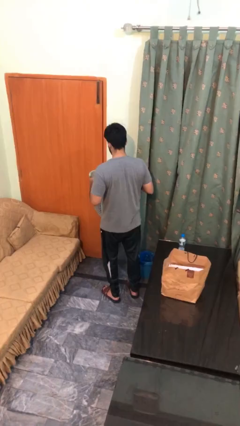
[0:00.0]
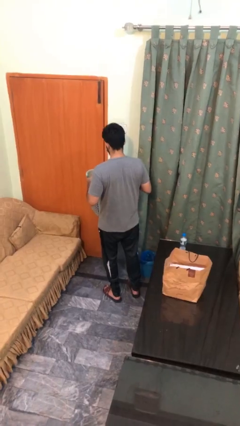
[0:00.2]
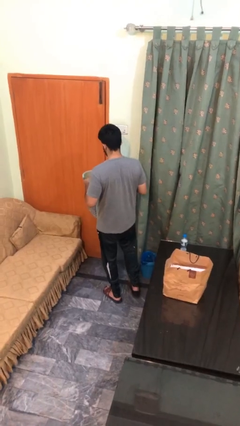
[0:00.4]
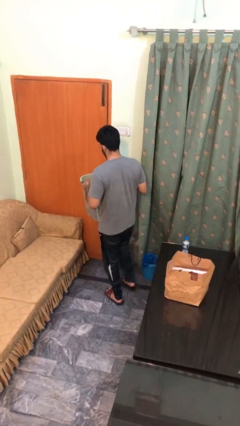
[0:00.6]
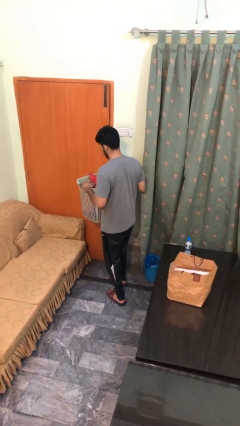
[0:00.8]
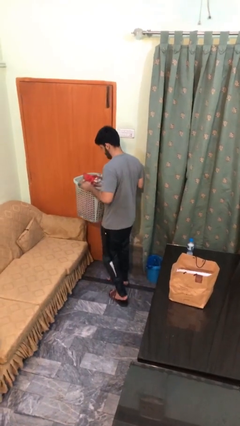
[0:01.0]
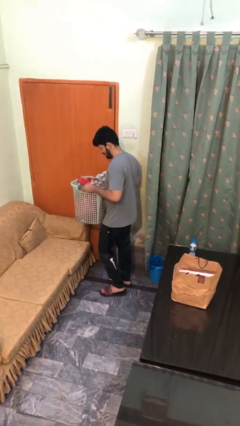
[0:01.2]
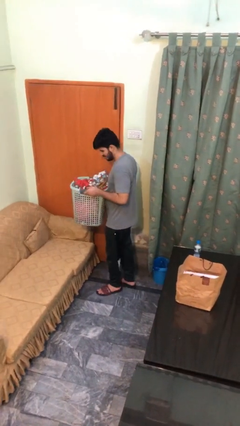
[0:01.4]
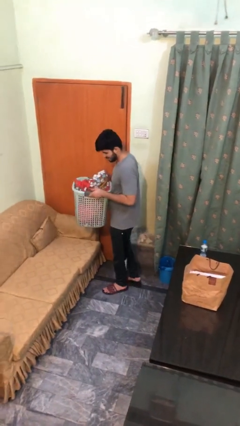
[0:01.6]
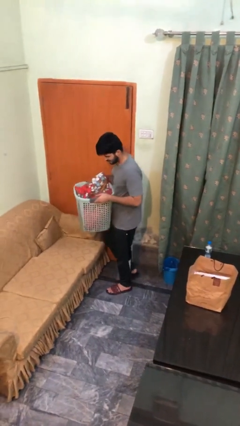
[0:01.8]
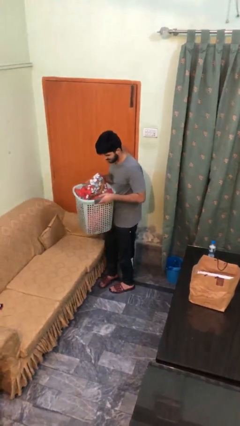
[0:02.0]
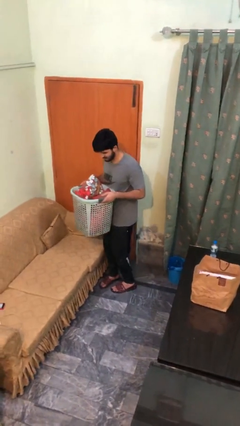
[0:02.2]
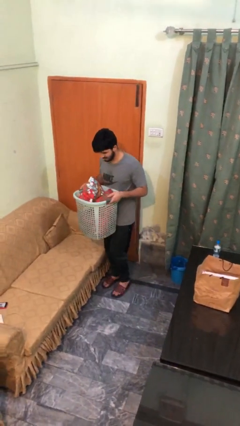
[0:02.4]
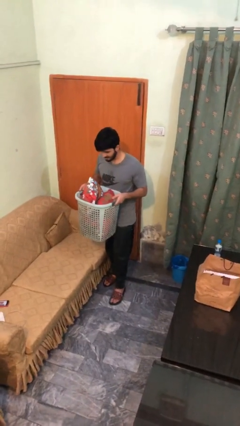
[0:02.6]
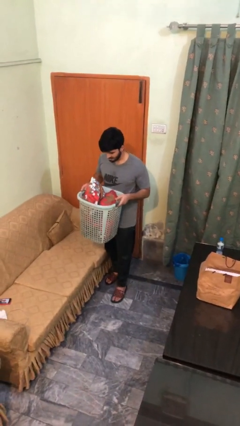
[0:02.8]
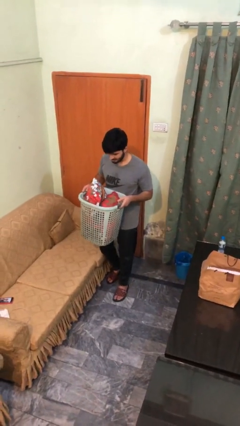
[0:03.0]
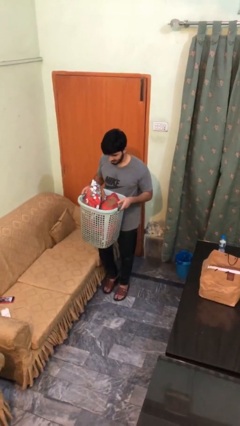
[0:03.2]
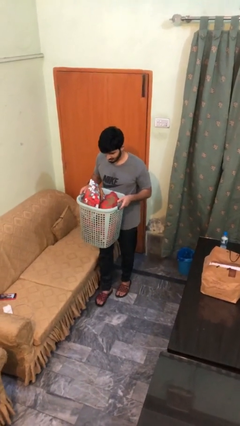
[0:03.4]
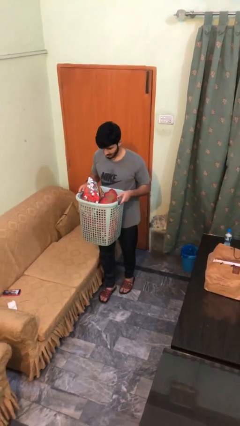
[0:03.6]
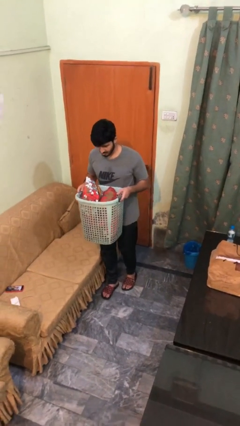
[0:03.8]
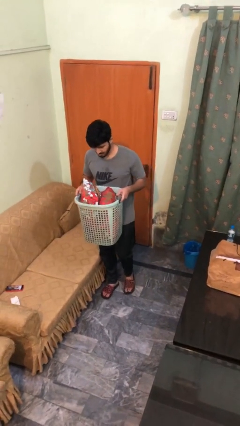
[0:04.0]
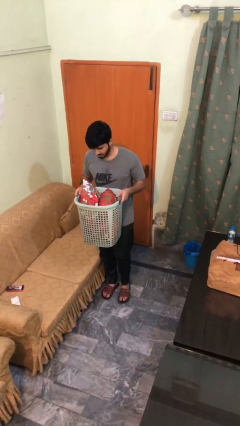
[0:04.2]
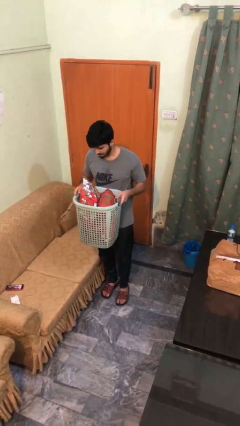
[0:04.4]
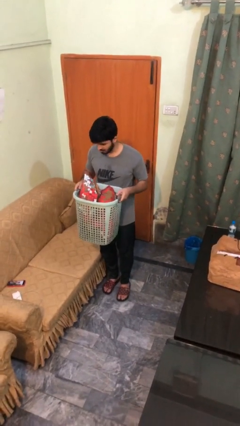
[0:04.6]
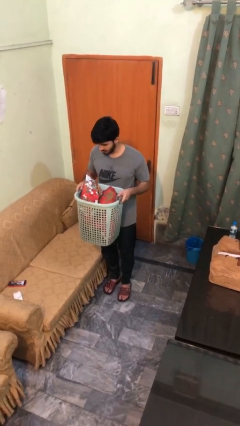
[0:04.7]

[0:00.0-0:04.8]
person carries laundry basket

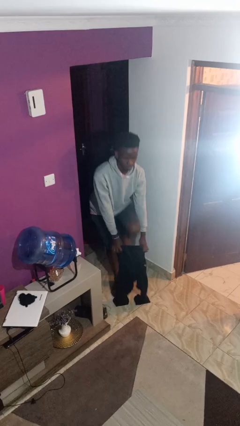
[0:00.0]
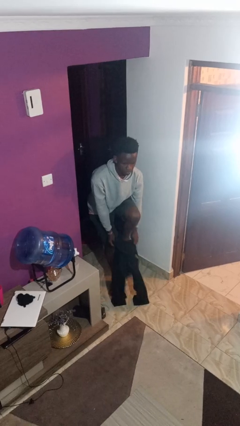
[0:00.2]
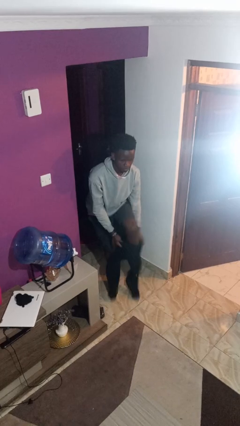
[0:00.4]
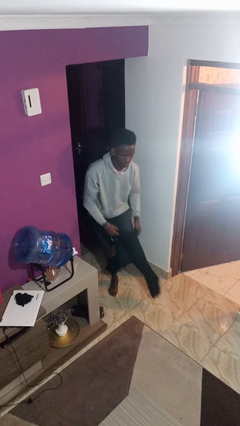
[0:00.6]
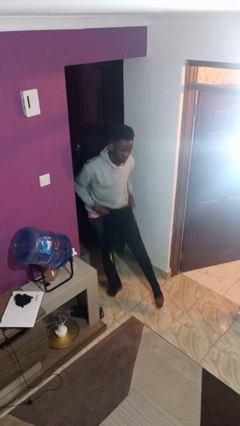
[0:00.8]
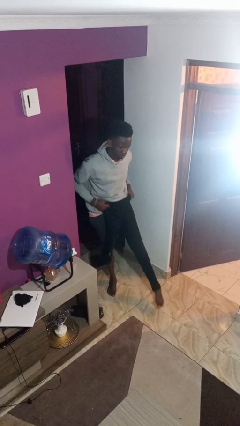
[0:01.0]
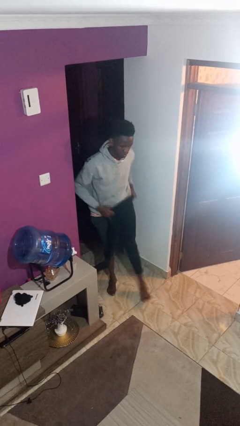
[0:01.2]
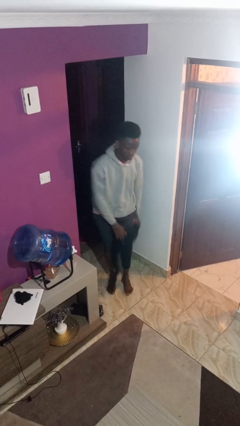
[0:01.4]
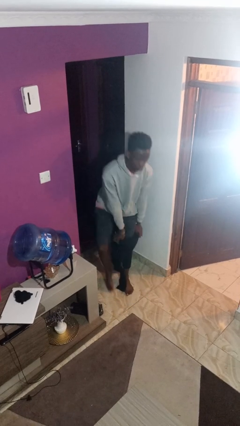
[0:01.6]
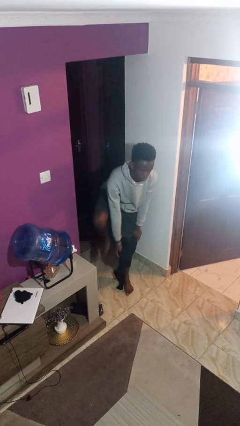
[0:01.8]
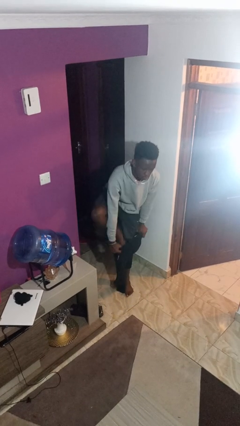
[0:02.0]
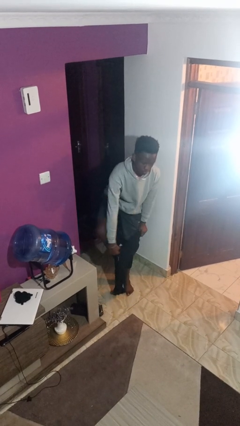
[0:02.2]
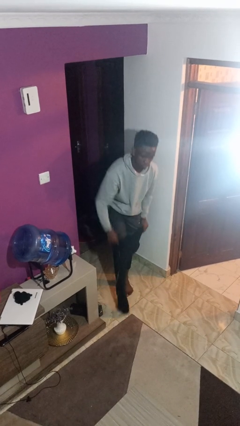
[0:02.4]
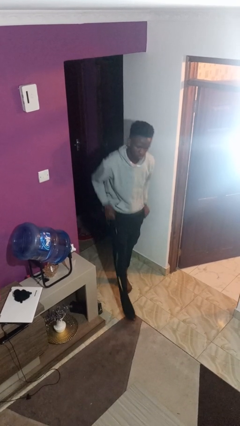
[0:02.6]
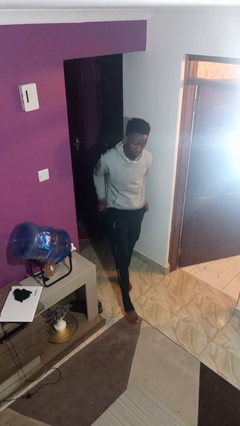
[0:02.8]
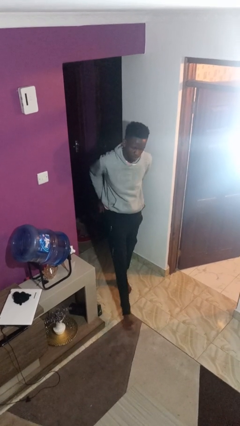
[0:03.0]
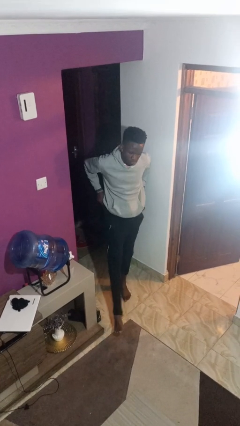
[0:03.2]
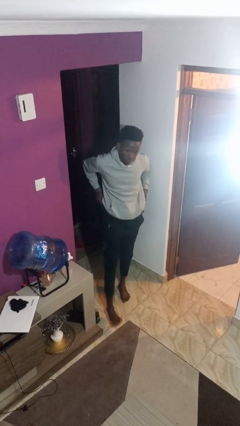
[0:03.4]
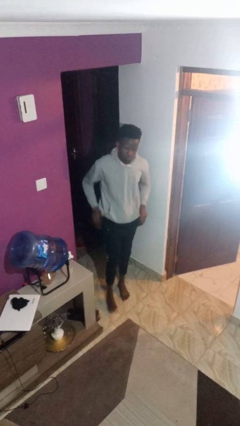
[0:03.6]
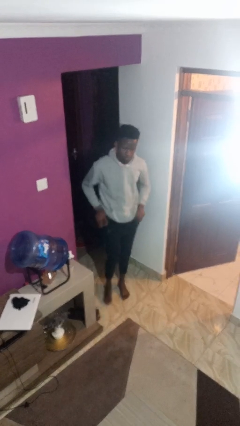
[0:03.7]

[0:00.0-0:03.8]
person puts on pants

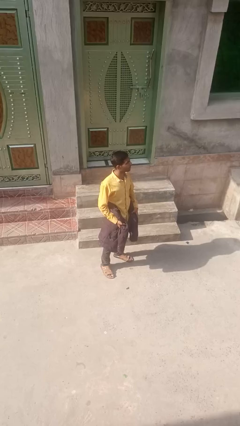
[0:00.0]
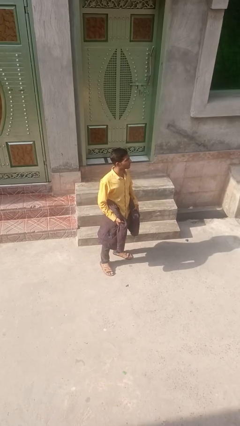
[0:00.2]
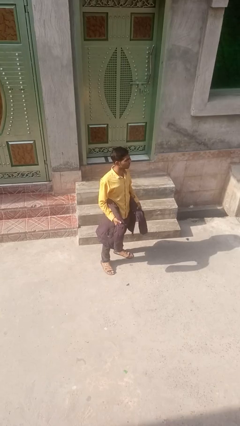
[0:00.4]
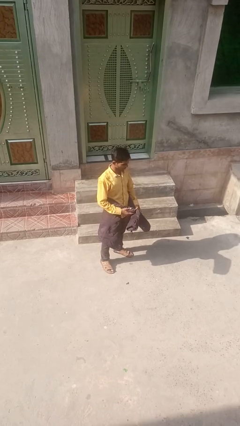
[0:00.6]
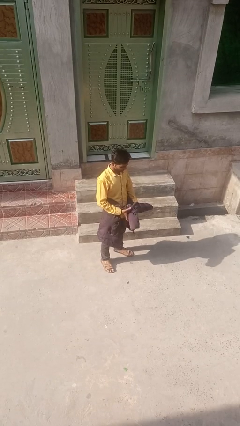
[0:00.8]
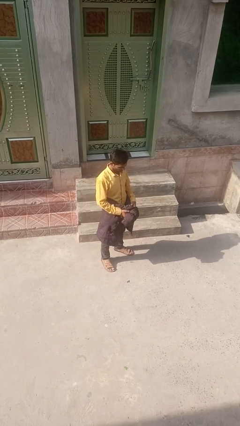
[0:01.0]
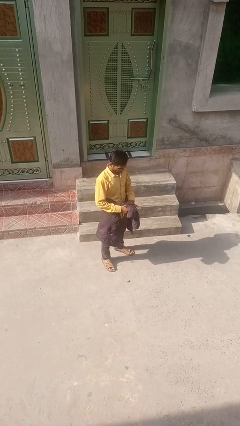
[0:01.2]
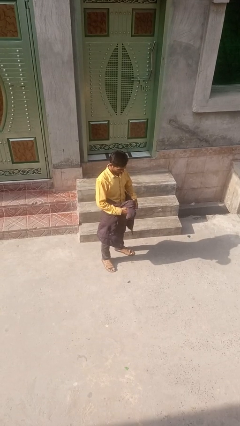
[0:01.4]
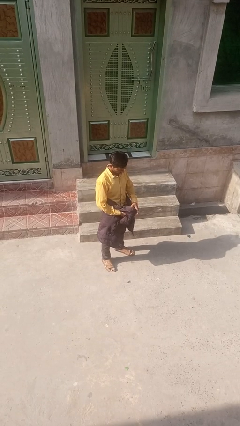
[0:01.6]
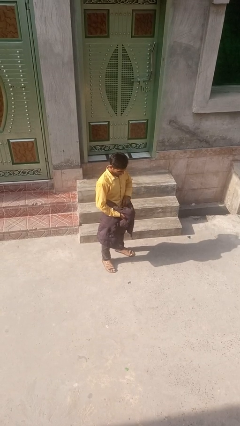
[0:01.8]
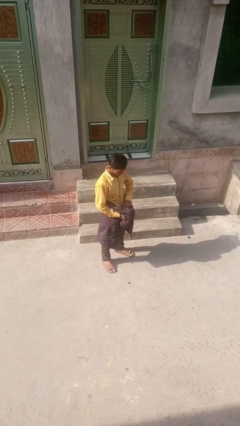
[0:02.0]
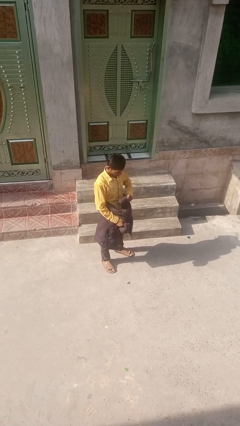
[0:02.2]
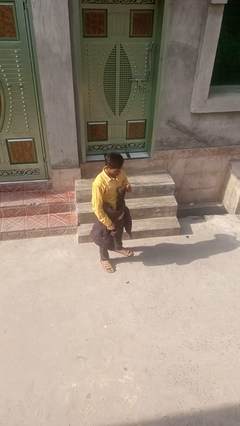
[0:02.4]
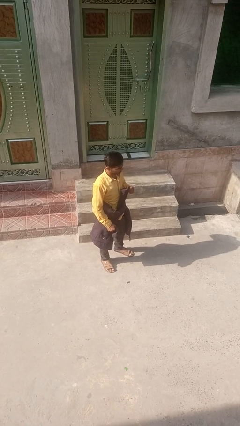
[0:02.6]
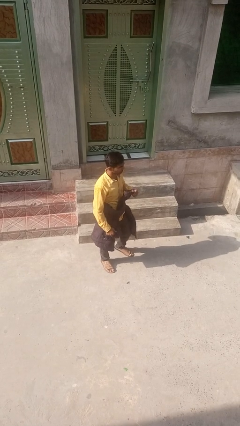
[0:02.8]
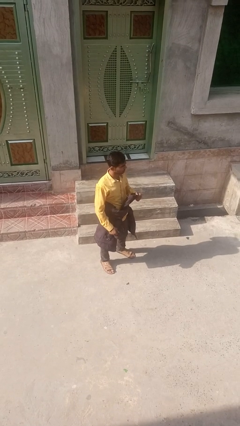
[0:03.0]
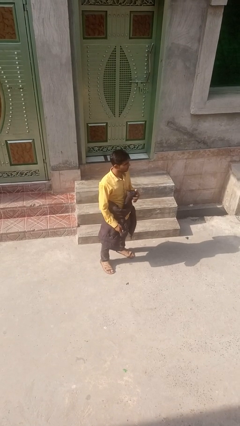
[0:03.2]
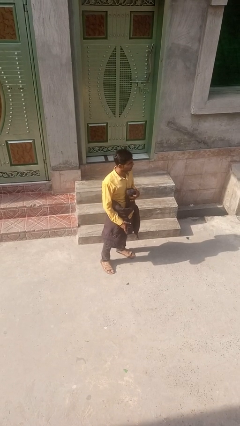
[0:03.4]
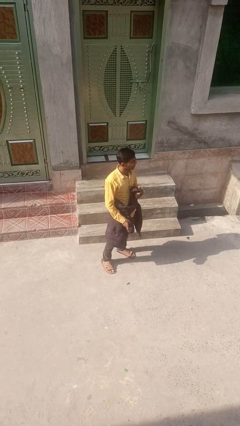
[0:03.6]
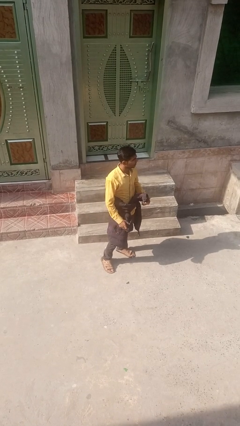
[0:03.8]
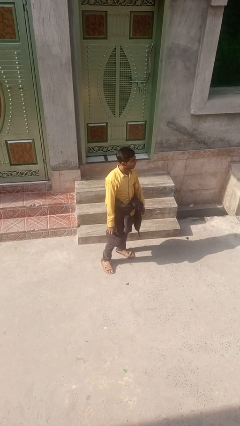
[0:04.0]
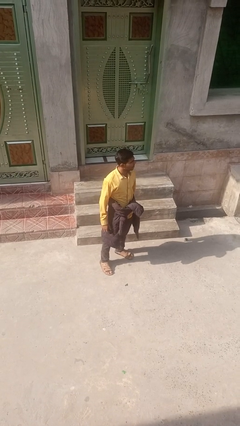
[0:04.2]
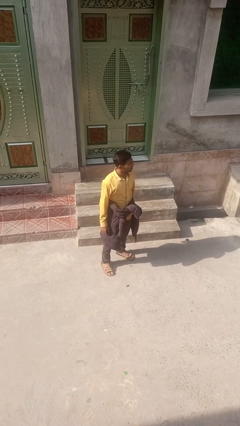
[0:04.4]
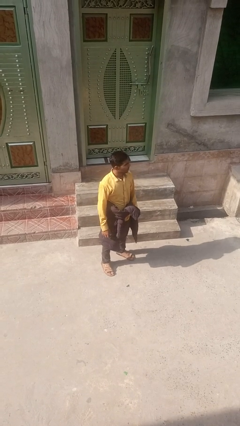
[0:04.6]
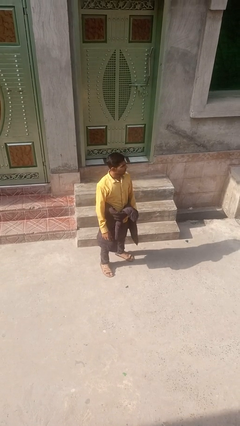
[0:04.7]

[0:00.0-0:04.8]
person ties jacket around waist

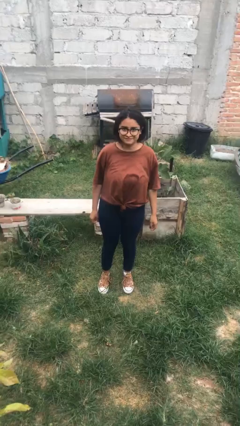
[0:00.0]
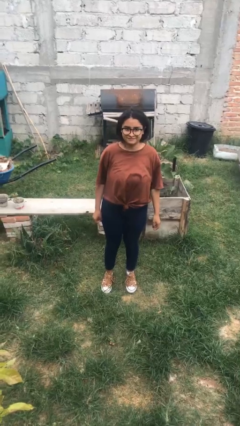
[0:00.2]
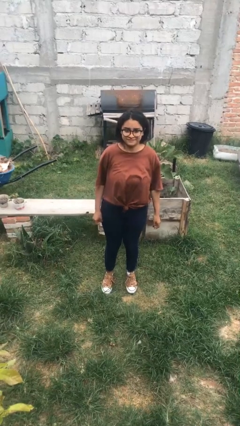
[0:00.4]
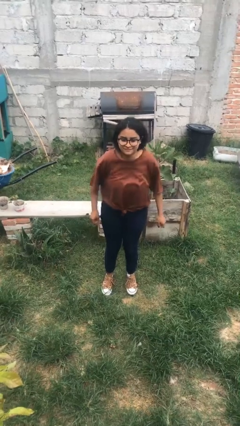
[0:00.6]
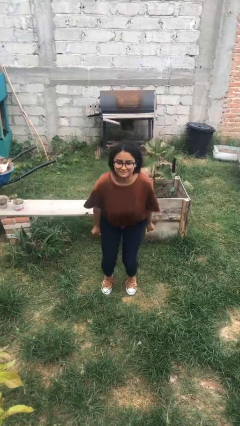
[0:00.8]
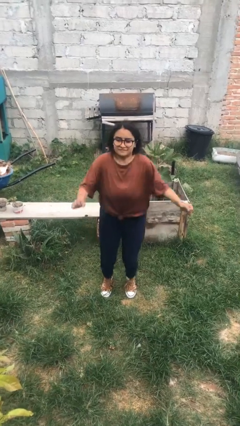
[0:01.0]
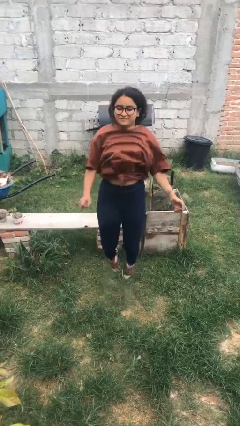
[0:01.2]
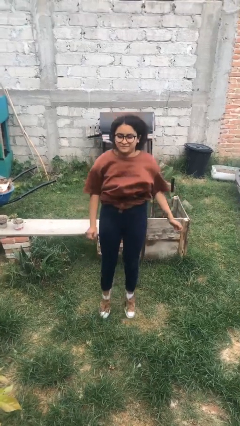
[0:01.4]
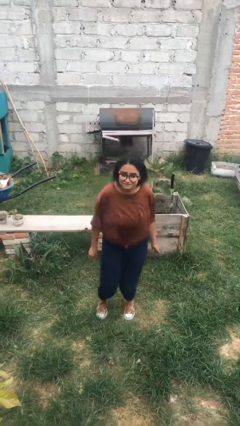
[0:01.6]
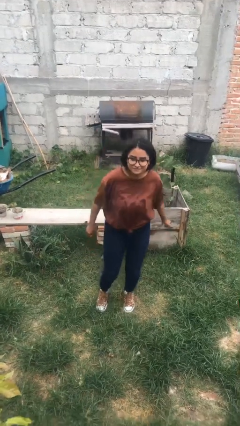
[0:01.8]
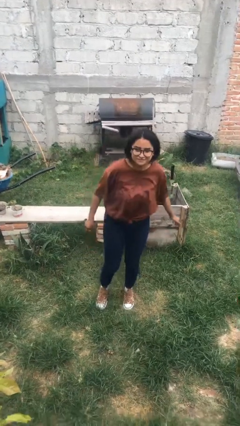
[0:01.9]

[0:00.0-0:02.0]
person jumps

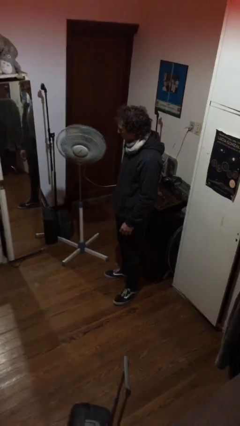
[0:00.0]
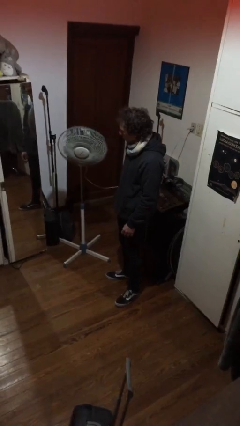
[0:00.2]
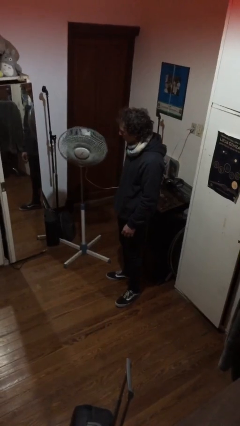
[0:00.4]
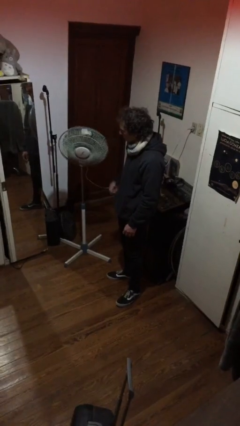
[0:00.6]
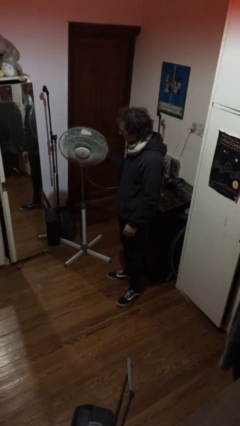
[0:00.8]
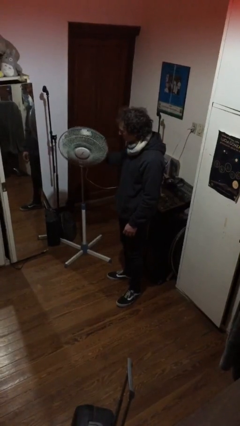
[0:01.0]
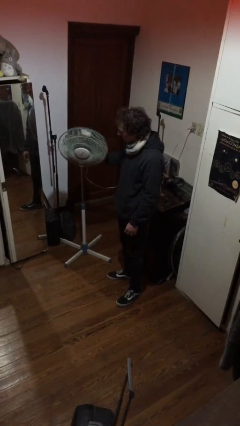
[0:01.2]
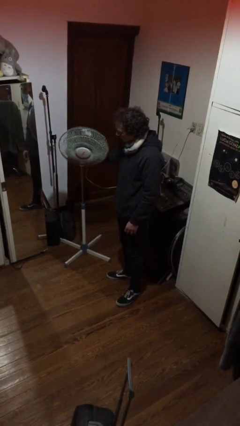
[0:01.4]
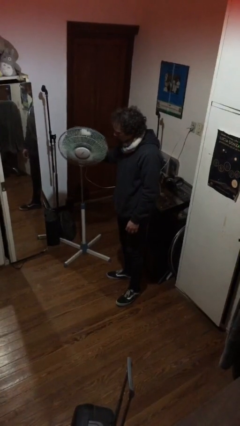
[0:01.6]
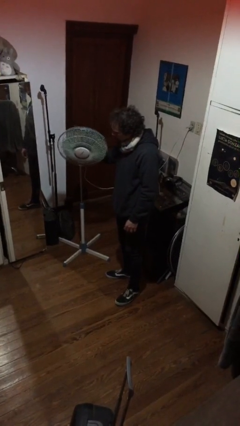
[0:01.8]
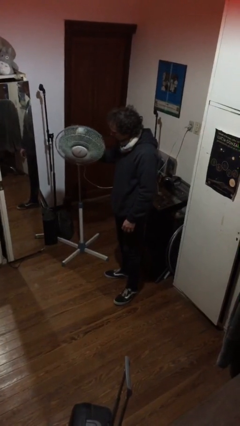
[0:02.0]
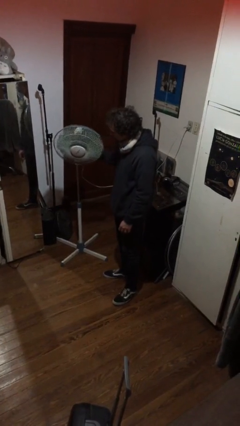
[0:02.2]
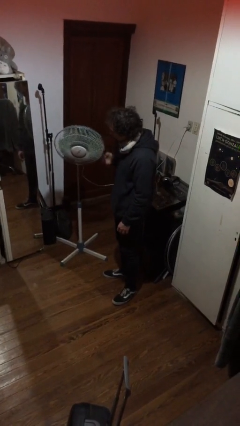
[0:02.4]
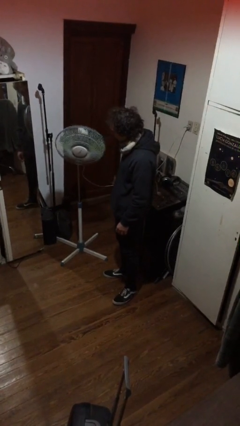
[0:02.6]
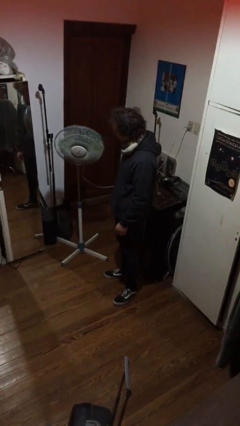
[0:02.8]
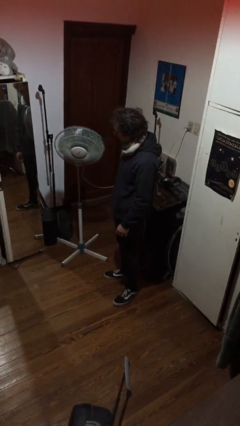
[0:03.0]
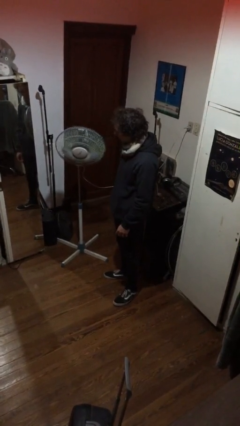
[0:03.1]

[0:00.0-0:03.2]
person turns off fan
